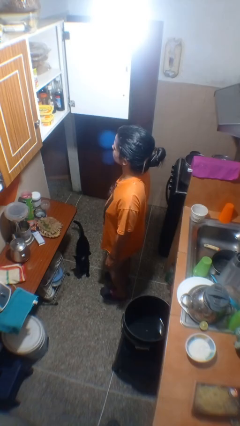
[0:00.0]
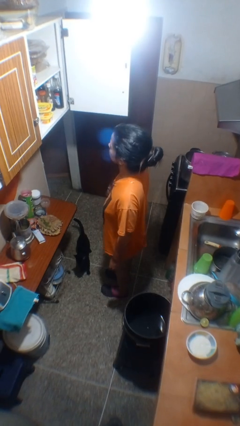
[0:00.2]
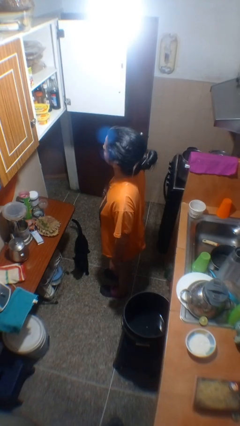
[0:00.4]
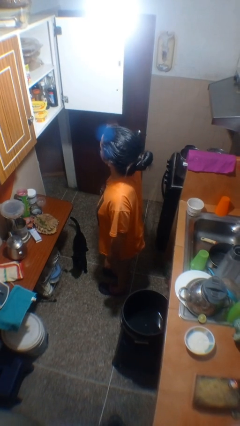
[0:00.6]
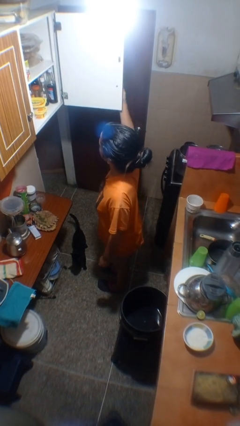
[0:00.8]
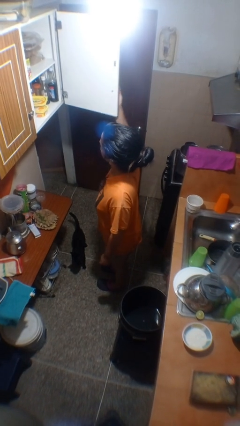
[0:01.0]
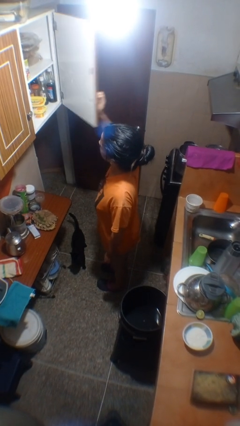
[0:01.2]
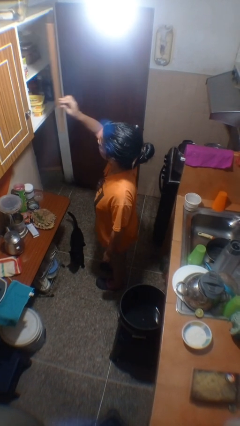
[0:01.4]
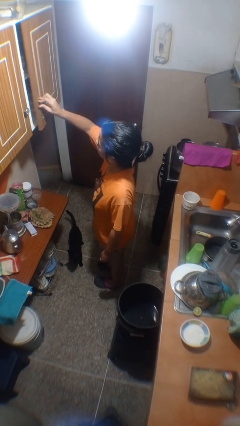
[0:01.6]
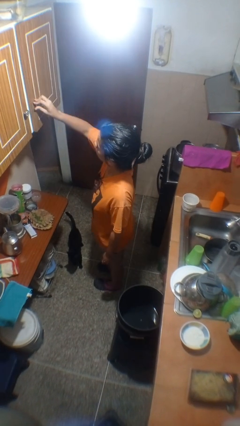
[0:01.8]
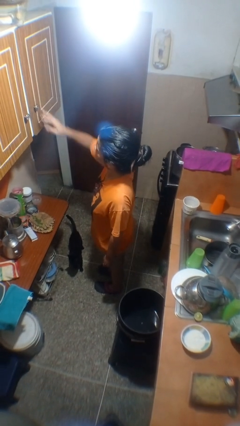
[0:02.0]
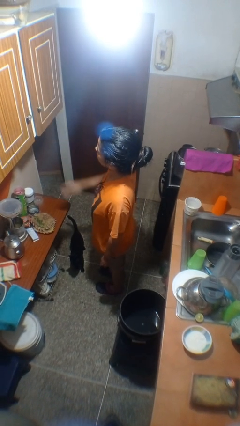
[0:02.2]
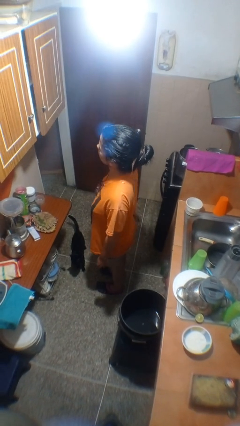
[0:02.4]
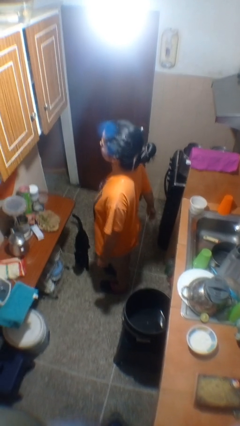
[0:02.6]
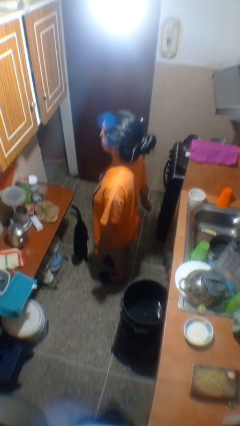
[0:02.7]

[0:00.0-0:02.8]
person closes cabinet

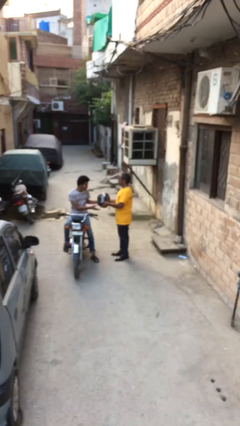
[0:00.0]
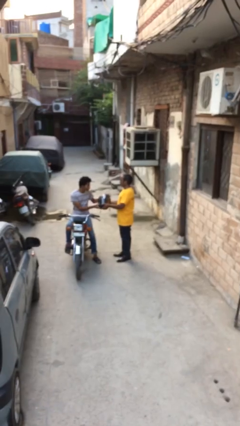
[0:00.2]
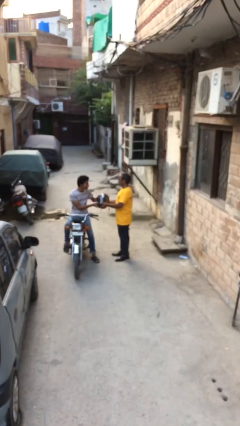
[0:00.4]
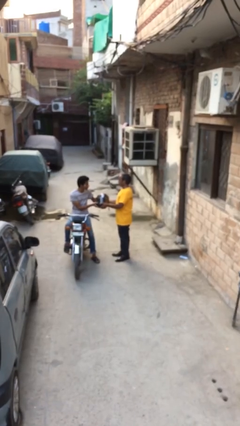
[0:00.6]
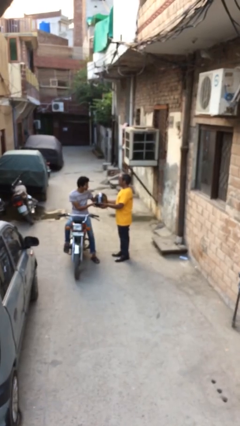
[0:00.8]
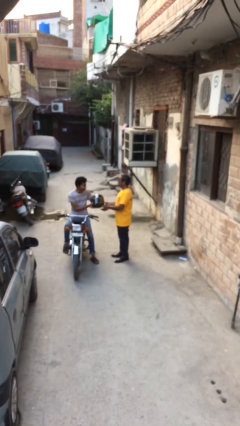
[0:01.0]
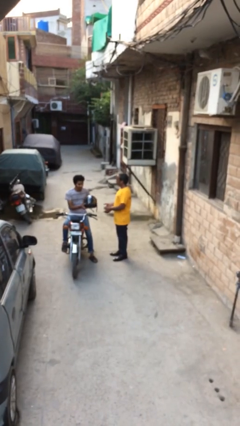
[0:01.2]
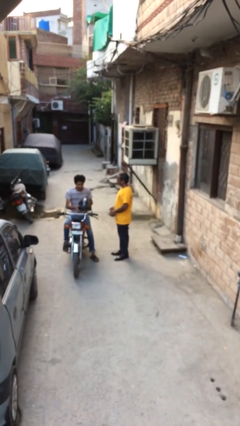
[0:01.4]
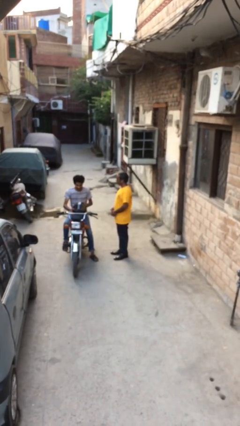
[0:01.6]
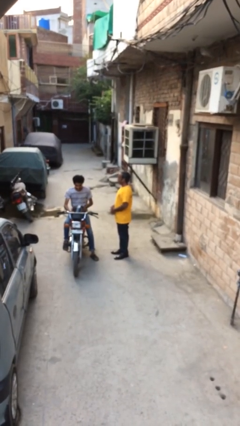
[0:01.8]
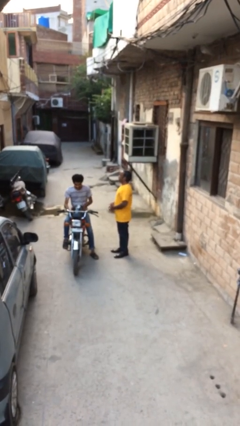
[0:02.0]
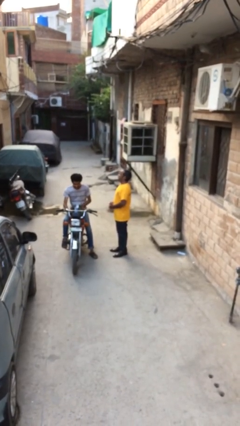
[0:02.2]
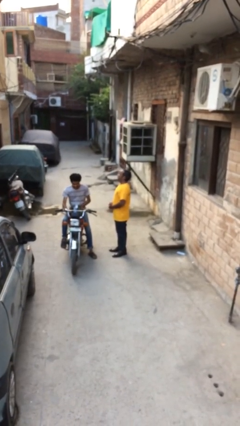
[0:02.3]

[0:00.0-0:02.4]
person transfers object to person

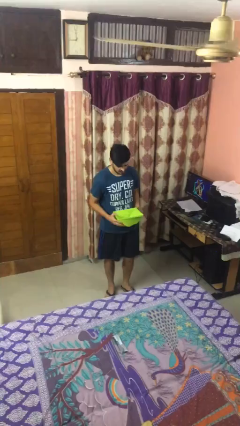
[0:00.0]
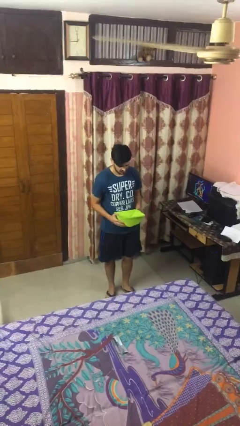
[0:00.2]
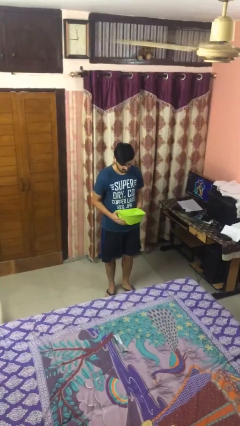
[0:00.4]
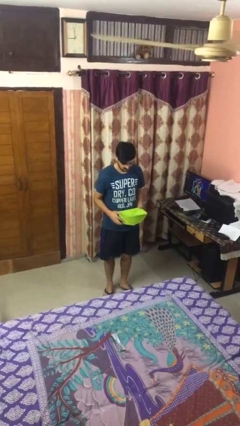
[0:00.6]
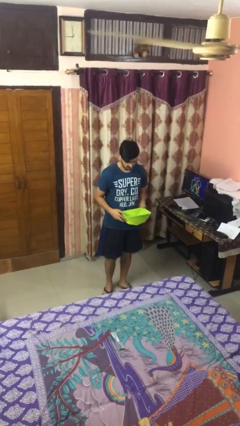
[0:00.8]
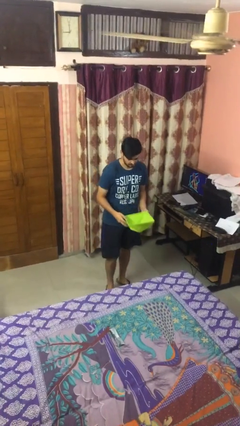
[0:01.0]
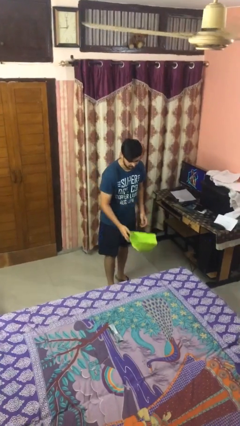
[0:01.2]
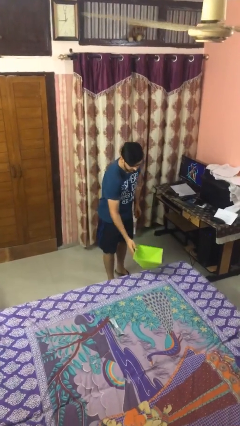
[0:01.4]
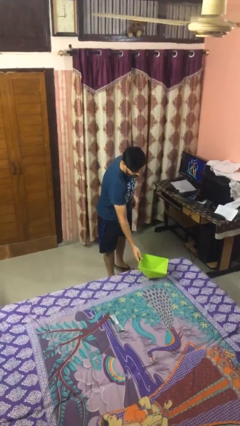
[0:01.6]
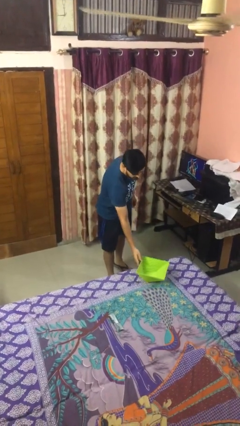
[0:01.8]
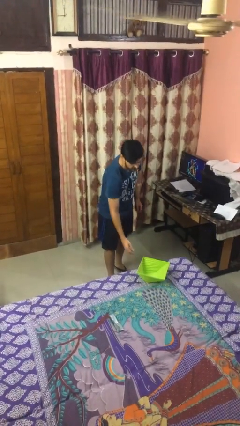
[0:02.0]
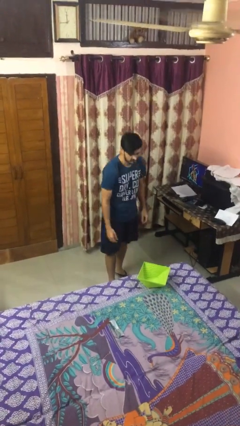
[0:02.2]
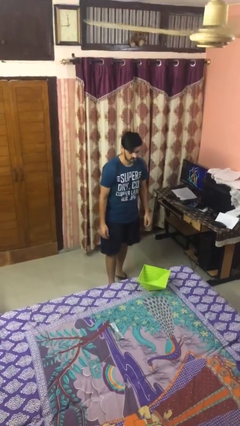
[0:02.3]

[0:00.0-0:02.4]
person puts down object on bed

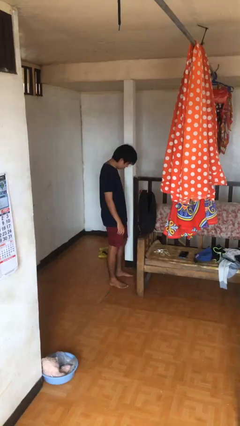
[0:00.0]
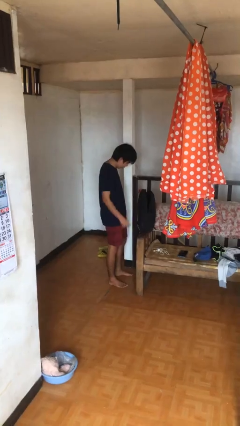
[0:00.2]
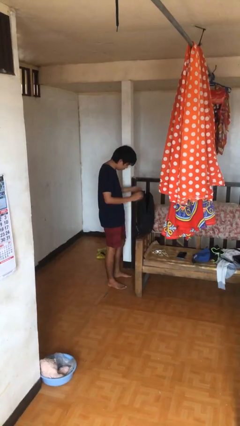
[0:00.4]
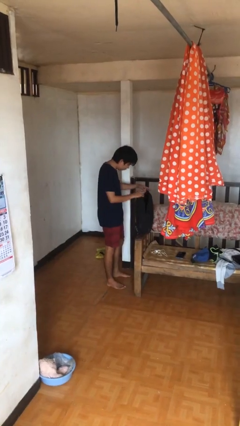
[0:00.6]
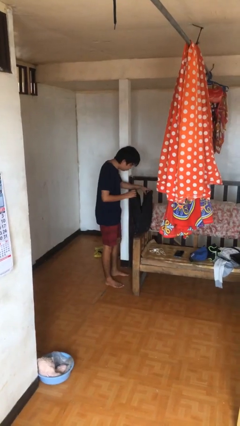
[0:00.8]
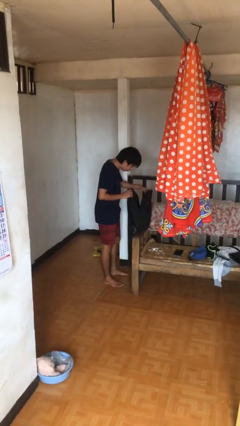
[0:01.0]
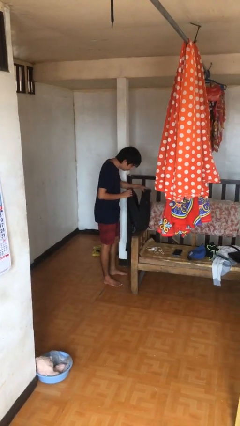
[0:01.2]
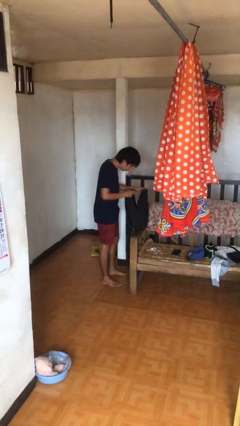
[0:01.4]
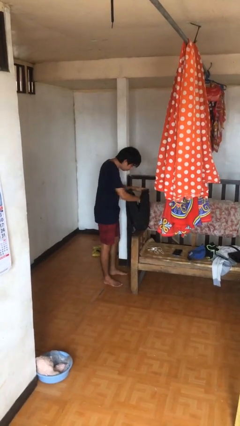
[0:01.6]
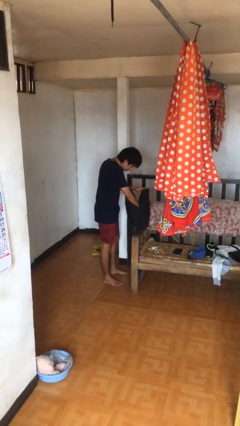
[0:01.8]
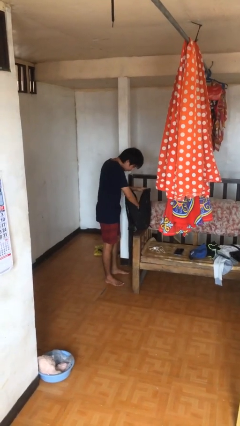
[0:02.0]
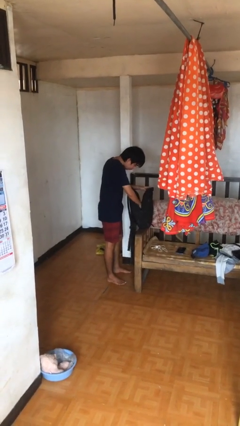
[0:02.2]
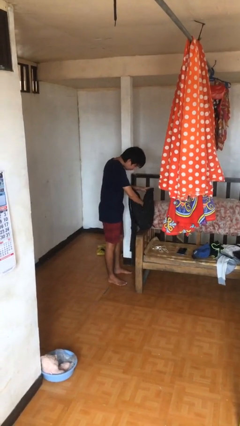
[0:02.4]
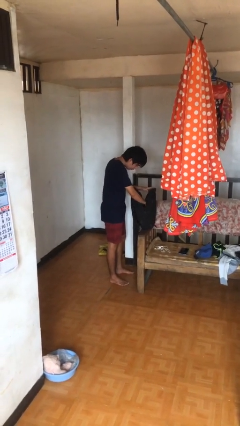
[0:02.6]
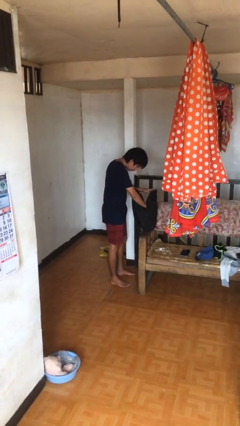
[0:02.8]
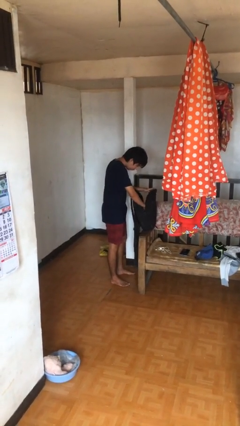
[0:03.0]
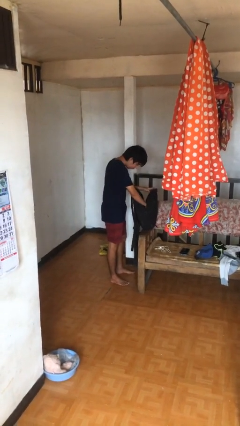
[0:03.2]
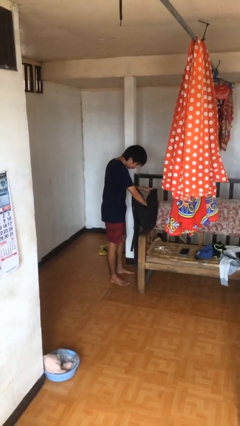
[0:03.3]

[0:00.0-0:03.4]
person searches in backpack

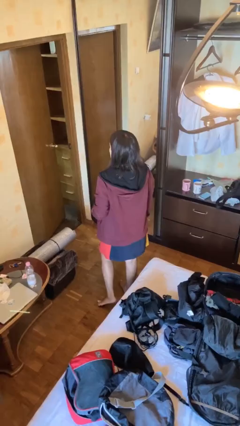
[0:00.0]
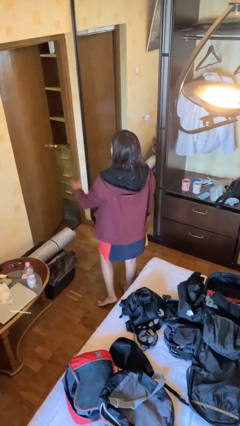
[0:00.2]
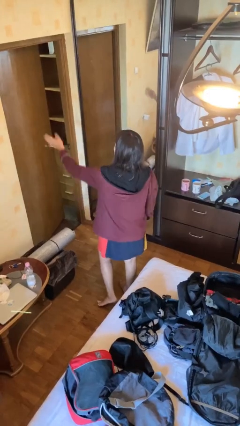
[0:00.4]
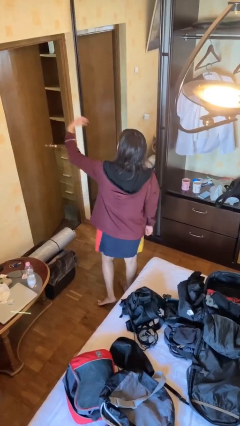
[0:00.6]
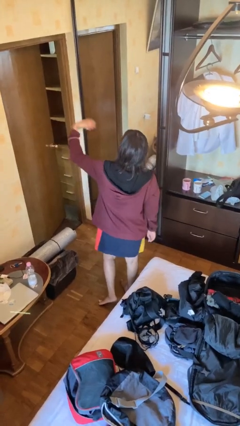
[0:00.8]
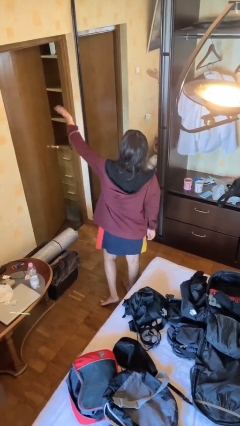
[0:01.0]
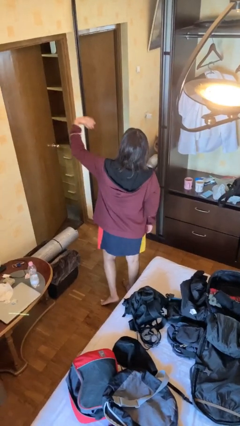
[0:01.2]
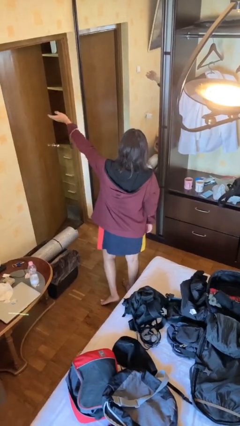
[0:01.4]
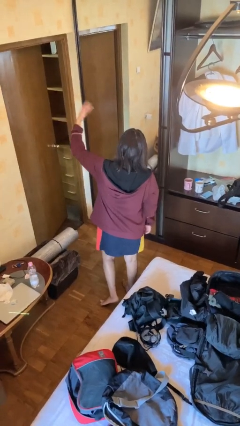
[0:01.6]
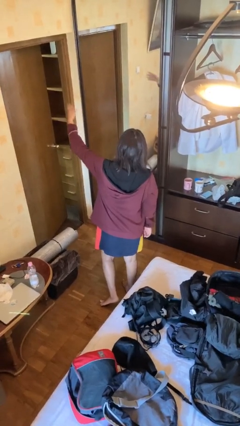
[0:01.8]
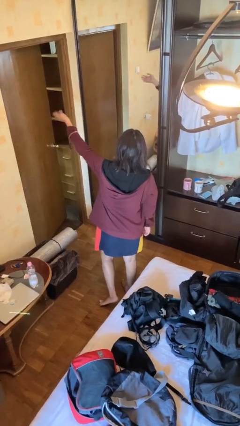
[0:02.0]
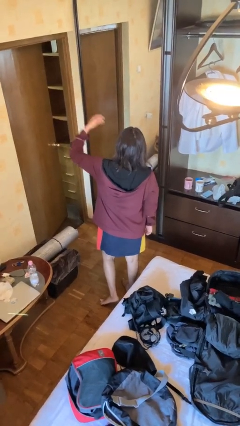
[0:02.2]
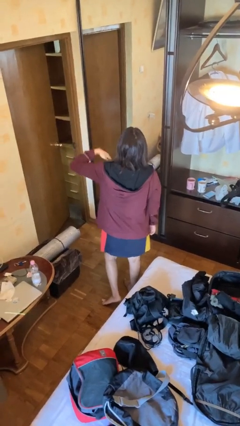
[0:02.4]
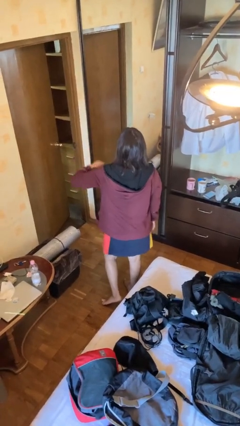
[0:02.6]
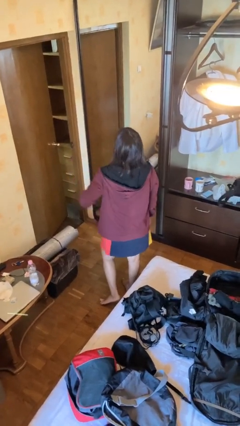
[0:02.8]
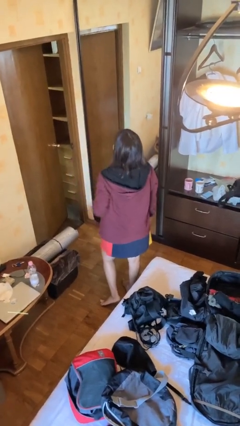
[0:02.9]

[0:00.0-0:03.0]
person gestures come here

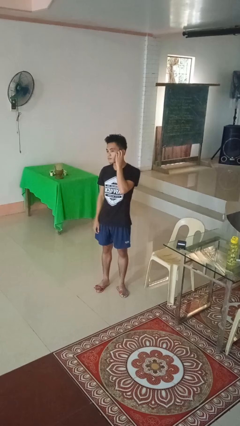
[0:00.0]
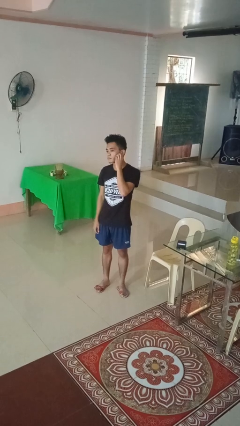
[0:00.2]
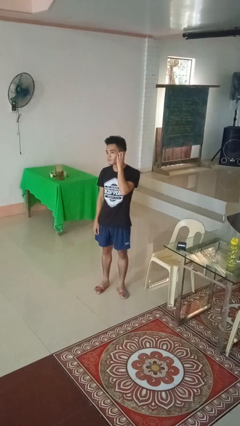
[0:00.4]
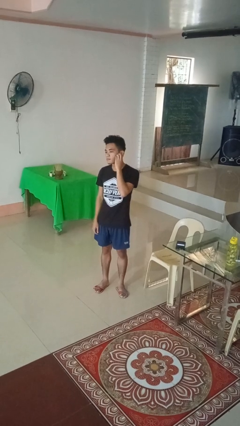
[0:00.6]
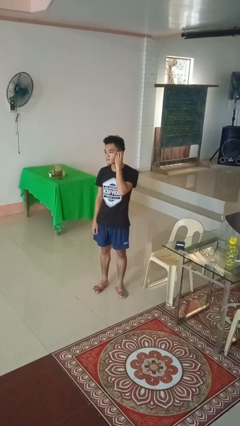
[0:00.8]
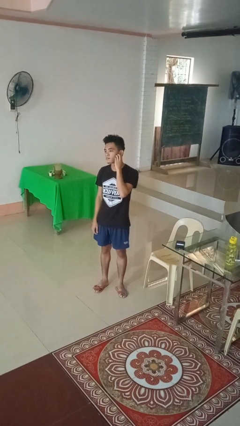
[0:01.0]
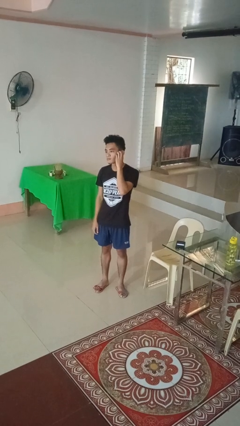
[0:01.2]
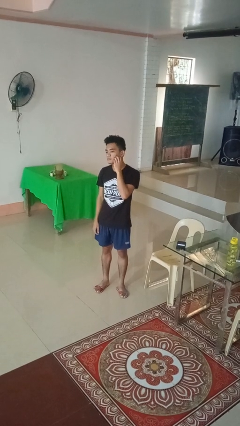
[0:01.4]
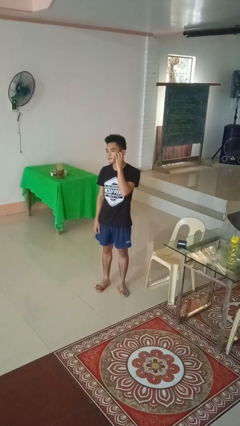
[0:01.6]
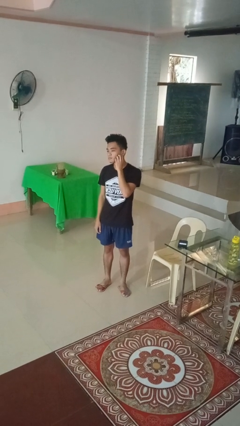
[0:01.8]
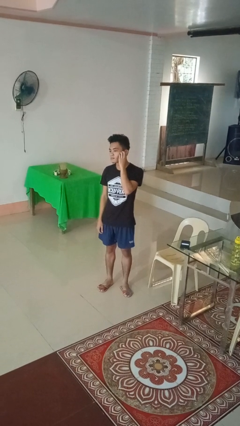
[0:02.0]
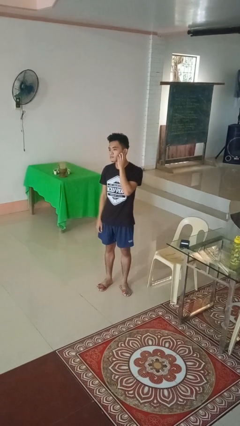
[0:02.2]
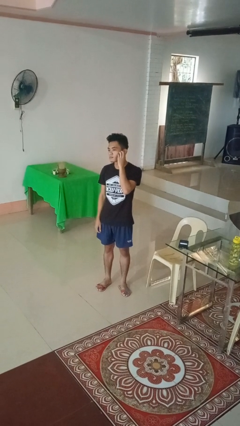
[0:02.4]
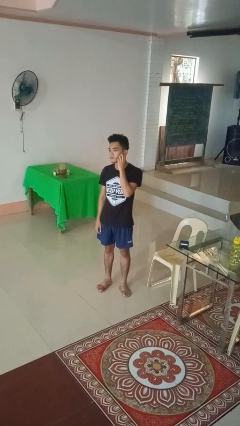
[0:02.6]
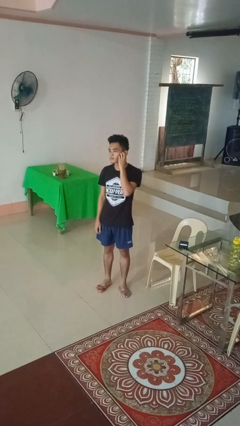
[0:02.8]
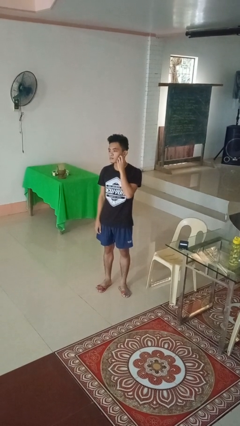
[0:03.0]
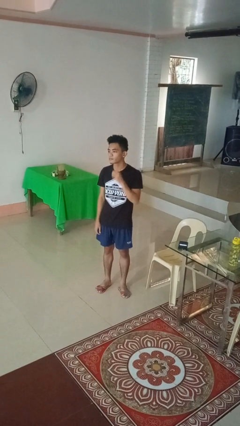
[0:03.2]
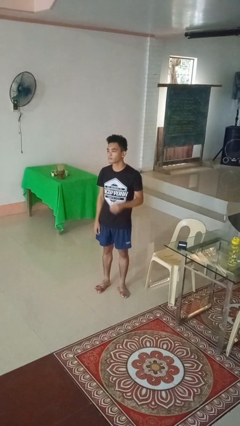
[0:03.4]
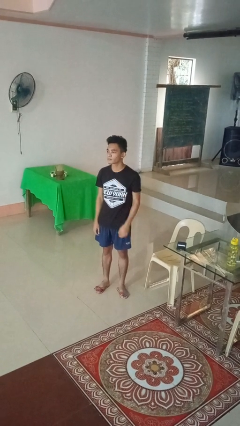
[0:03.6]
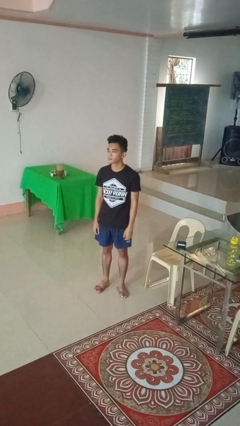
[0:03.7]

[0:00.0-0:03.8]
person scratches face
